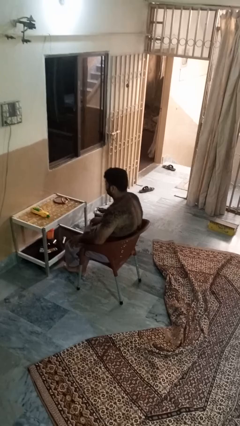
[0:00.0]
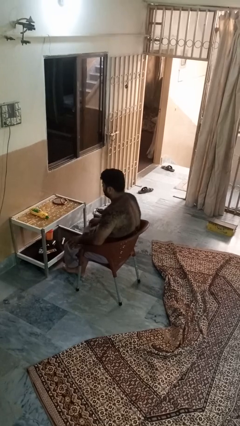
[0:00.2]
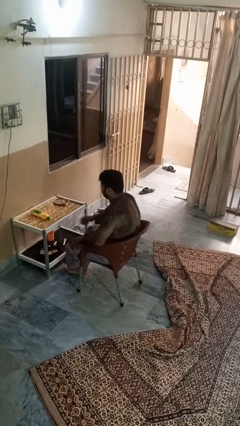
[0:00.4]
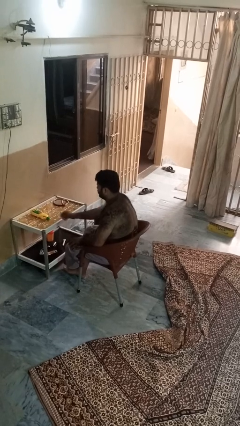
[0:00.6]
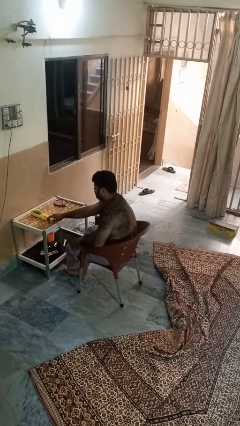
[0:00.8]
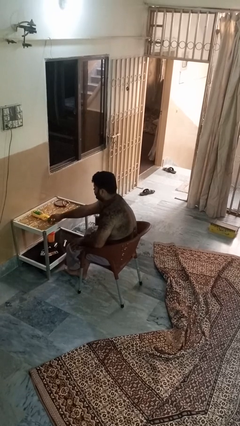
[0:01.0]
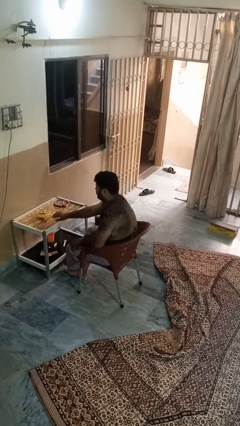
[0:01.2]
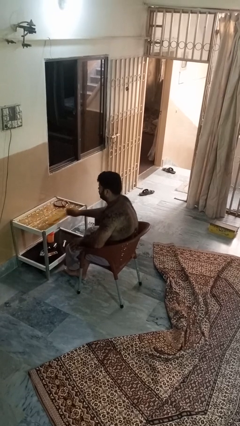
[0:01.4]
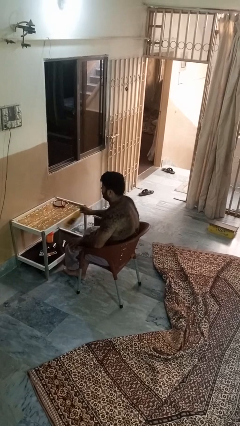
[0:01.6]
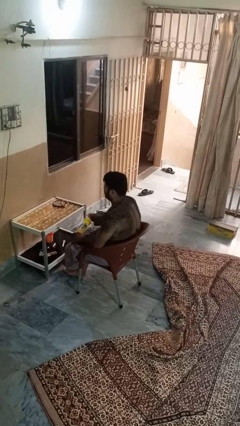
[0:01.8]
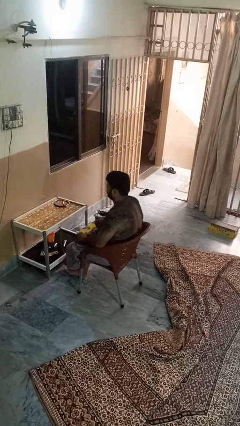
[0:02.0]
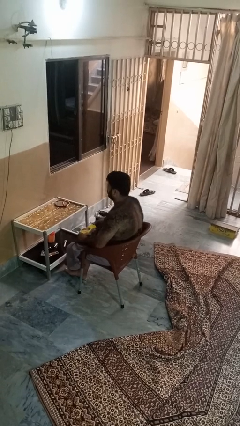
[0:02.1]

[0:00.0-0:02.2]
person picks up object from table

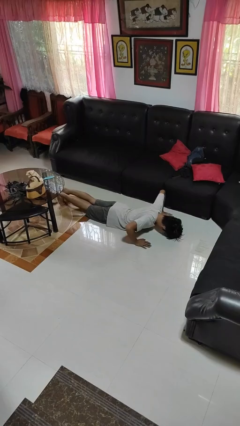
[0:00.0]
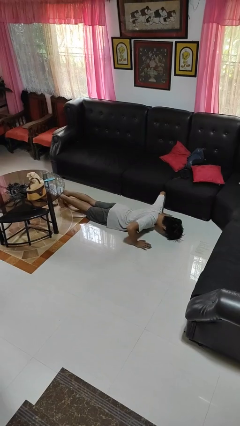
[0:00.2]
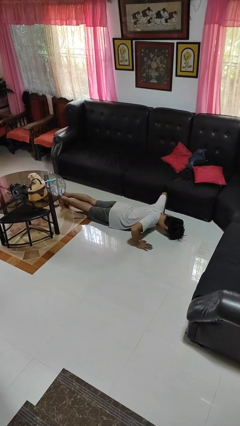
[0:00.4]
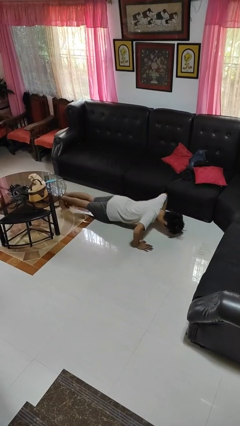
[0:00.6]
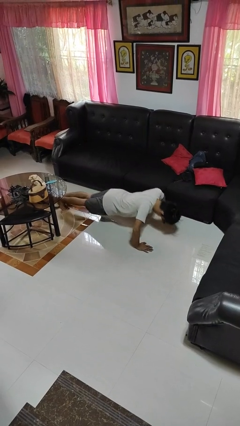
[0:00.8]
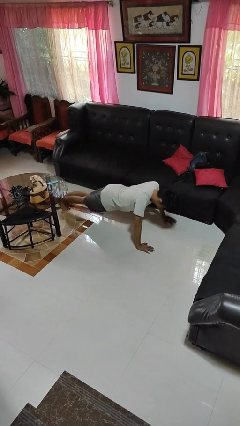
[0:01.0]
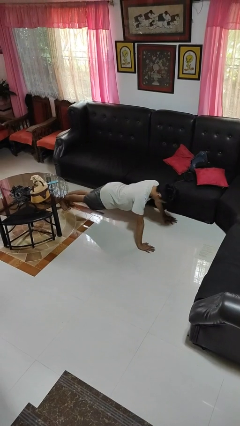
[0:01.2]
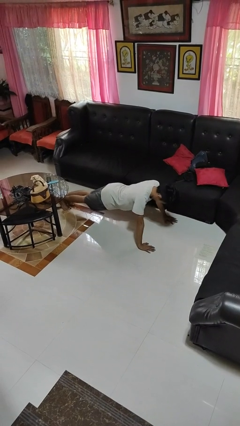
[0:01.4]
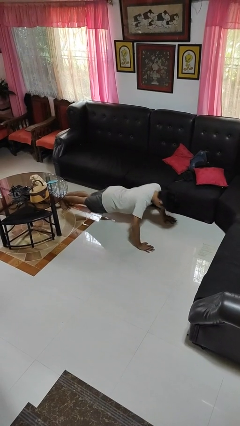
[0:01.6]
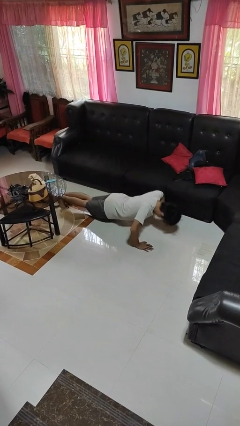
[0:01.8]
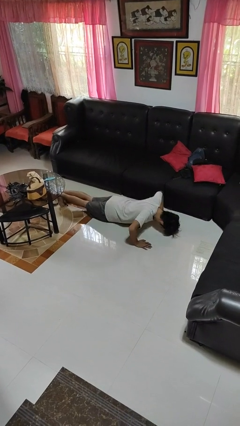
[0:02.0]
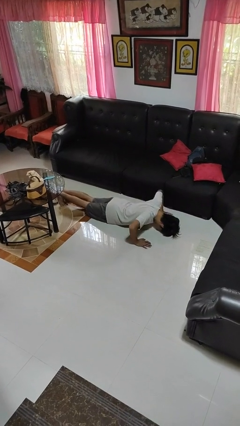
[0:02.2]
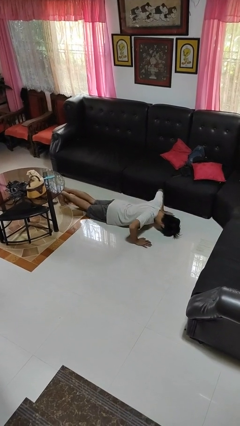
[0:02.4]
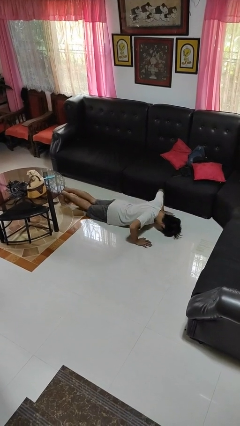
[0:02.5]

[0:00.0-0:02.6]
person exercises with pushup

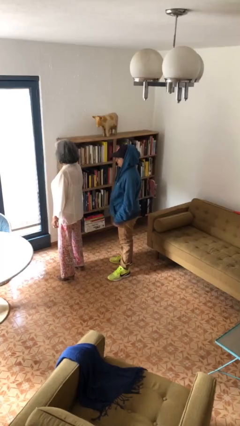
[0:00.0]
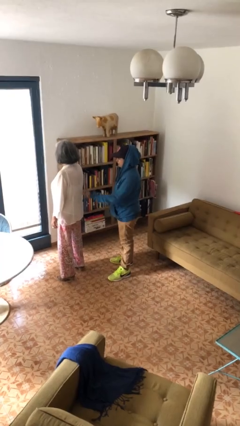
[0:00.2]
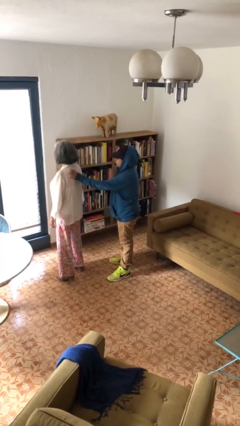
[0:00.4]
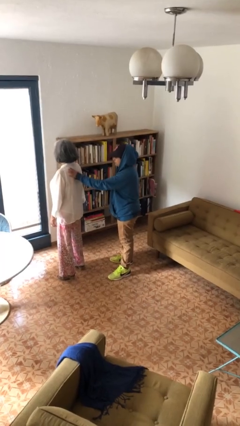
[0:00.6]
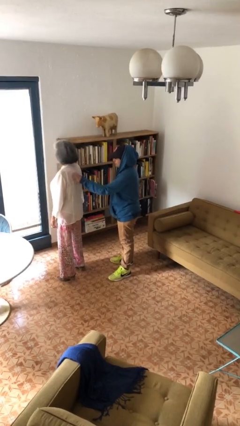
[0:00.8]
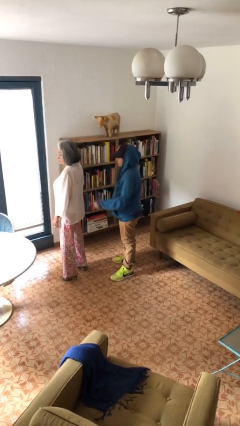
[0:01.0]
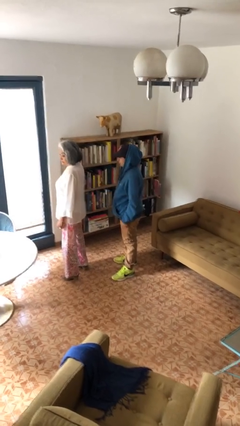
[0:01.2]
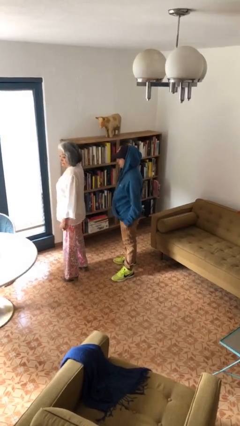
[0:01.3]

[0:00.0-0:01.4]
person touches back of person

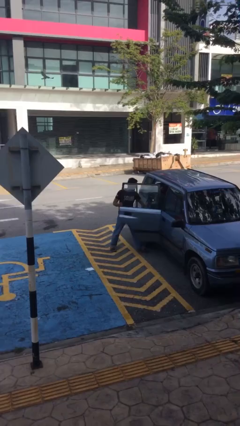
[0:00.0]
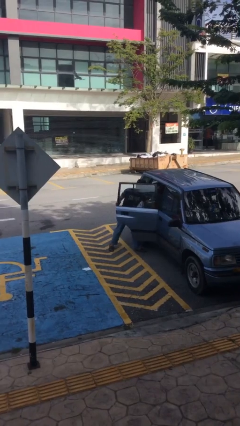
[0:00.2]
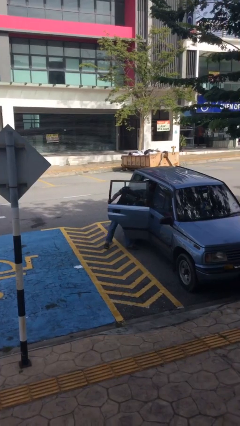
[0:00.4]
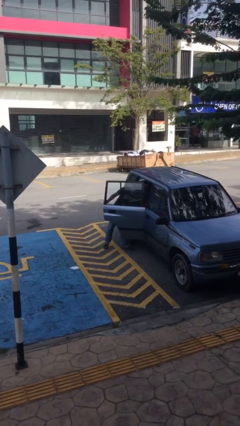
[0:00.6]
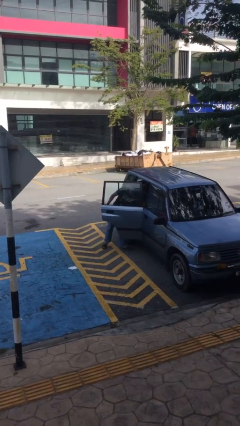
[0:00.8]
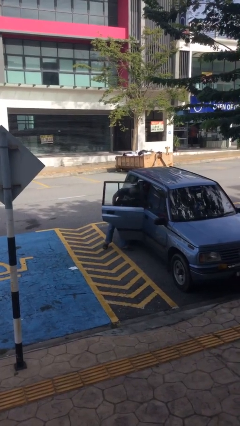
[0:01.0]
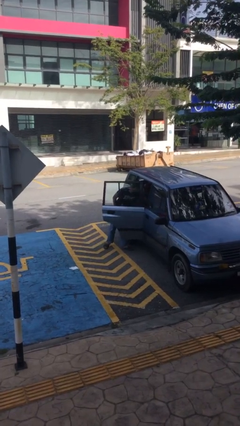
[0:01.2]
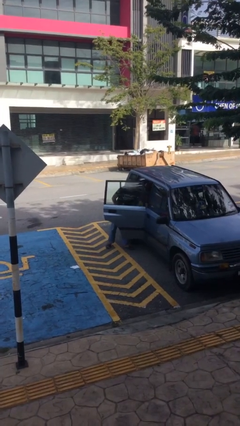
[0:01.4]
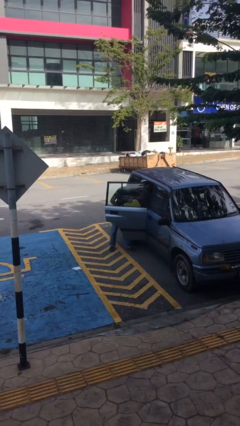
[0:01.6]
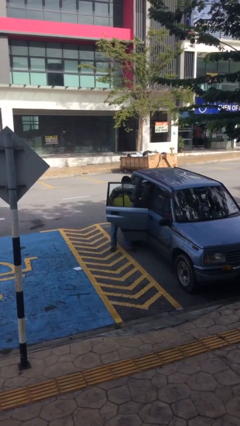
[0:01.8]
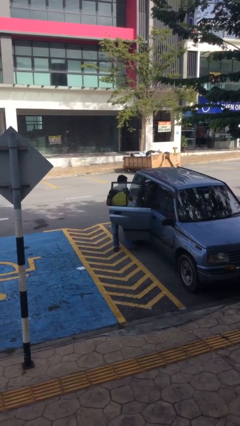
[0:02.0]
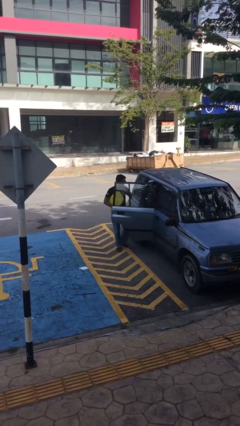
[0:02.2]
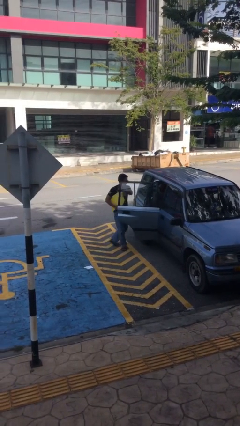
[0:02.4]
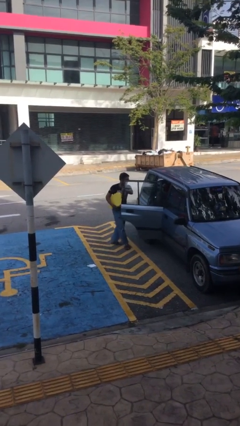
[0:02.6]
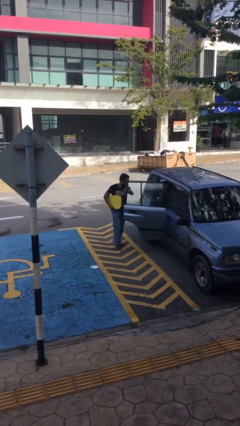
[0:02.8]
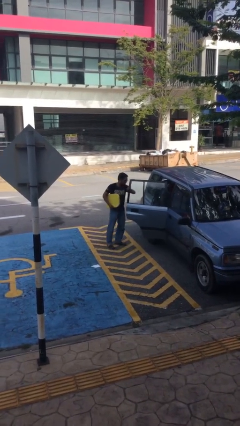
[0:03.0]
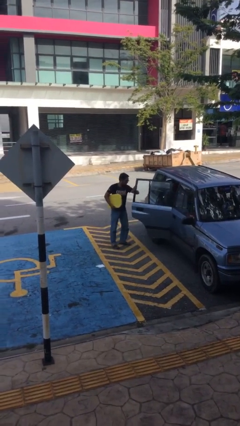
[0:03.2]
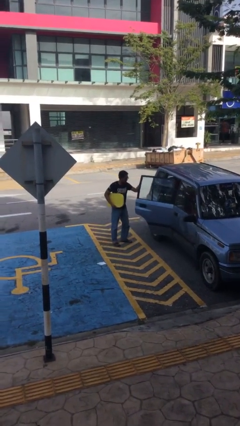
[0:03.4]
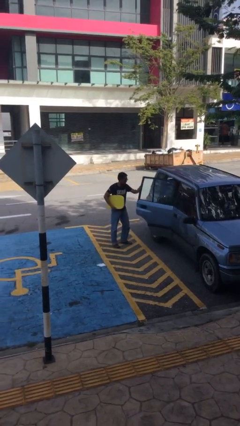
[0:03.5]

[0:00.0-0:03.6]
person unloads car

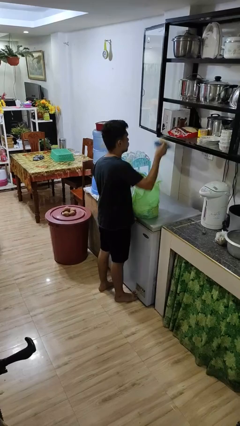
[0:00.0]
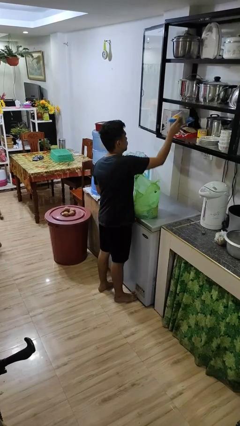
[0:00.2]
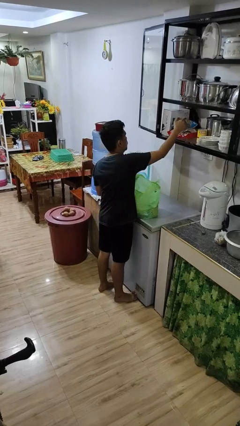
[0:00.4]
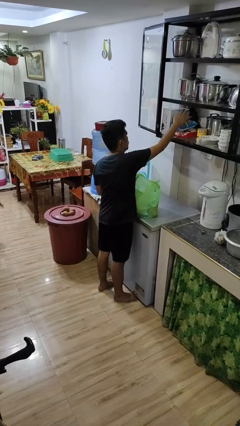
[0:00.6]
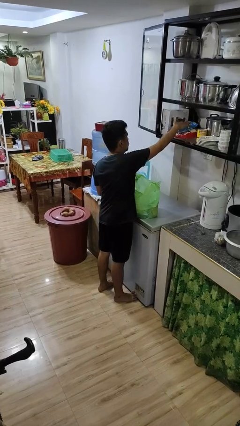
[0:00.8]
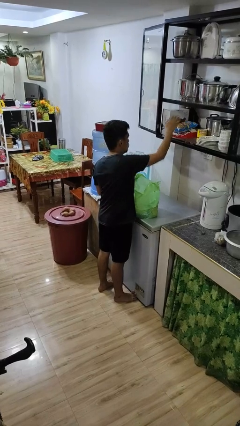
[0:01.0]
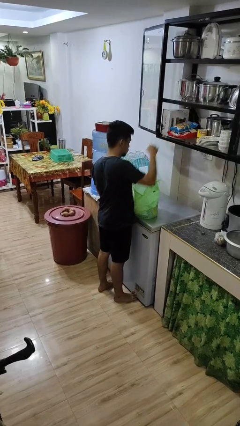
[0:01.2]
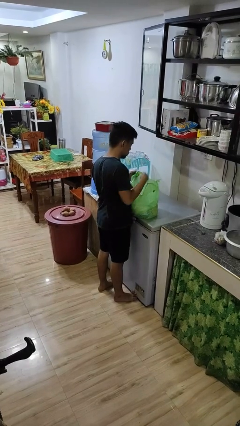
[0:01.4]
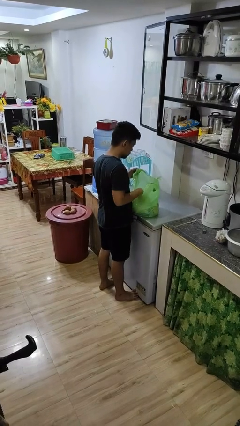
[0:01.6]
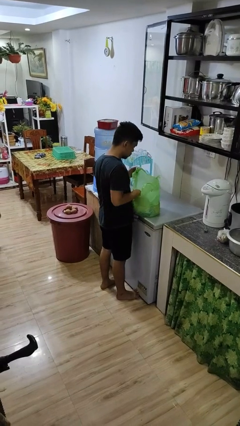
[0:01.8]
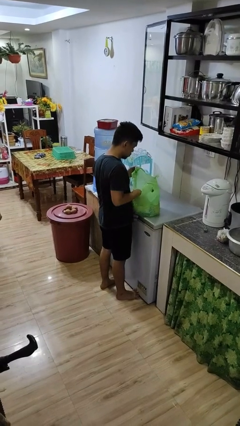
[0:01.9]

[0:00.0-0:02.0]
person loads groceries into cabinet

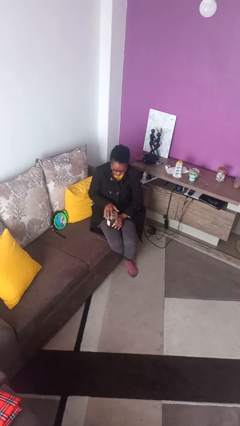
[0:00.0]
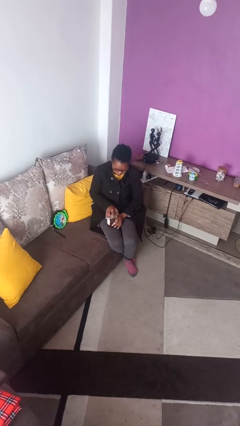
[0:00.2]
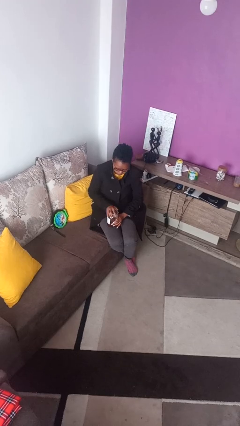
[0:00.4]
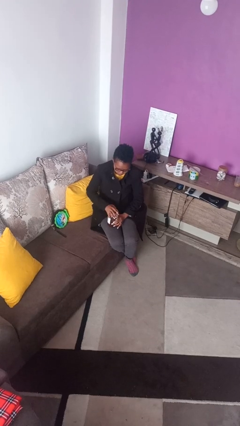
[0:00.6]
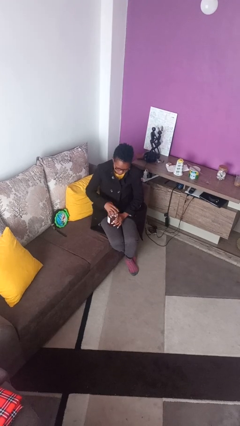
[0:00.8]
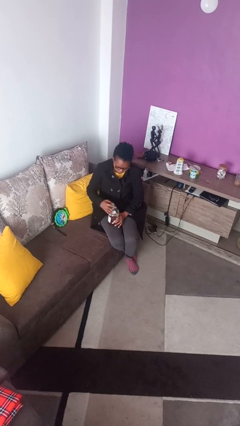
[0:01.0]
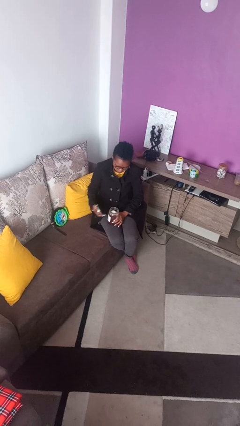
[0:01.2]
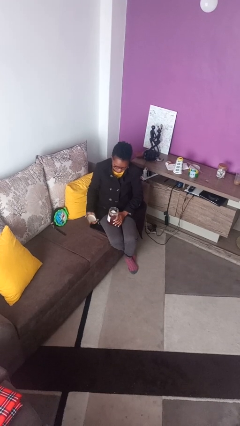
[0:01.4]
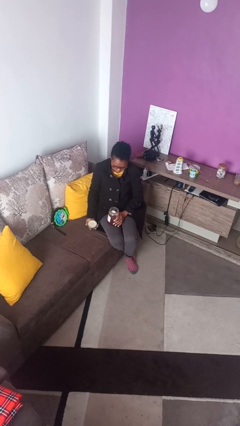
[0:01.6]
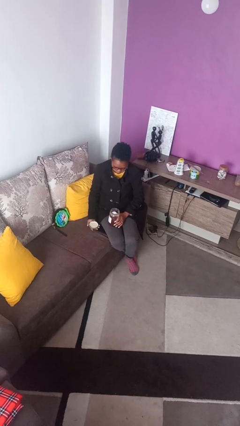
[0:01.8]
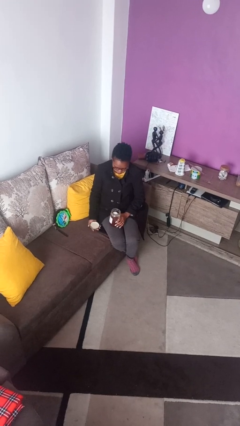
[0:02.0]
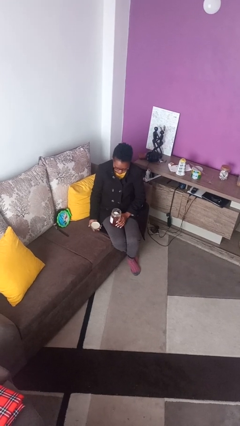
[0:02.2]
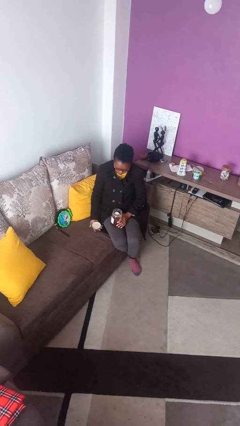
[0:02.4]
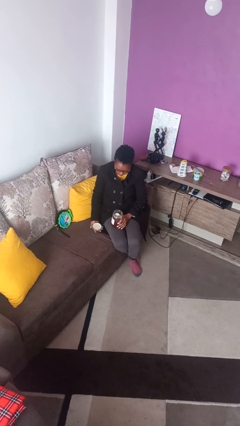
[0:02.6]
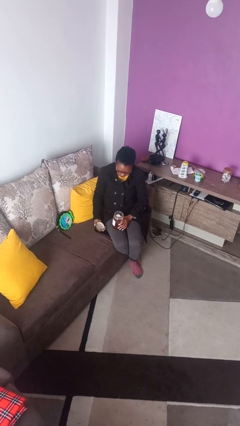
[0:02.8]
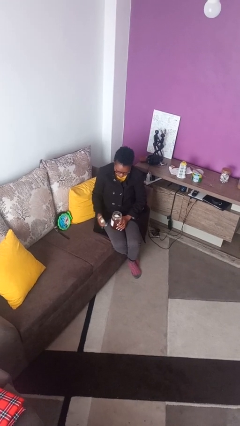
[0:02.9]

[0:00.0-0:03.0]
person opens jar

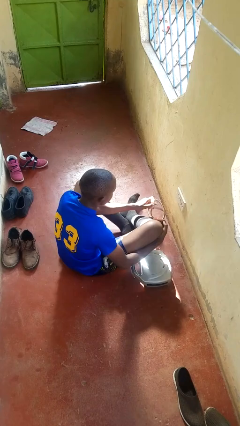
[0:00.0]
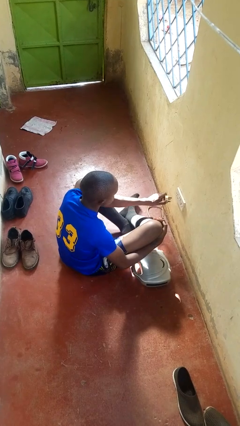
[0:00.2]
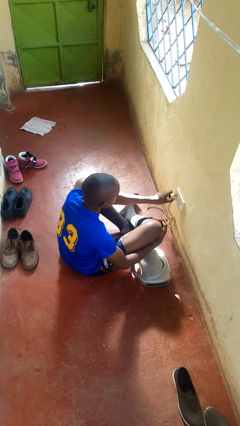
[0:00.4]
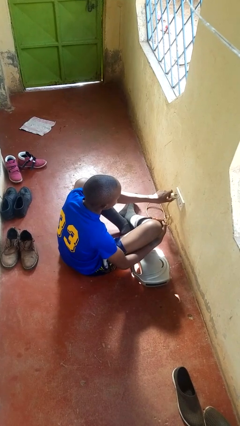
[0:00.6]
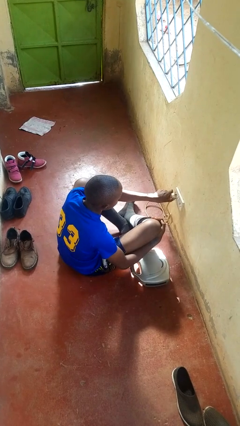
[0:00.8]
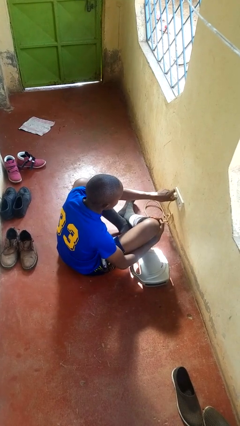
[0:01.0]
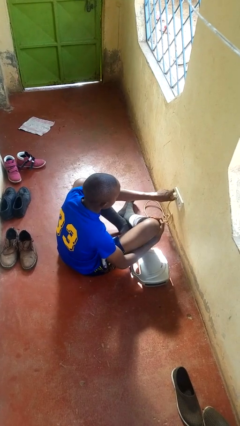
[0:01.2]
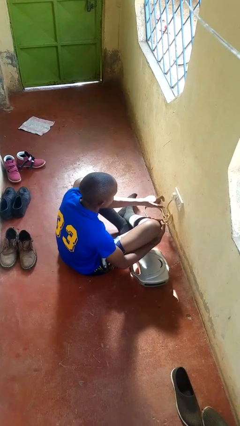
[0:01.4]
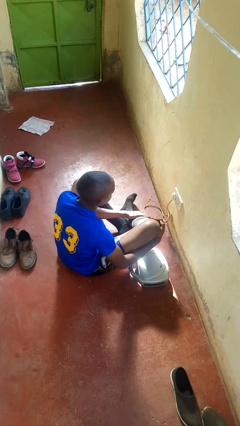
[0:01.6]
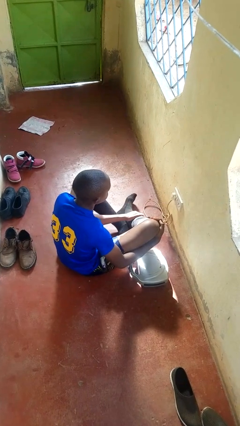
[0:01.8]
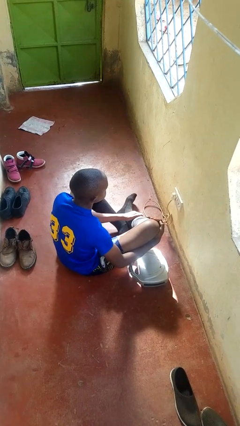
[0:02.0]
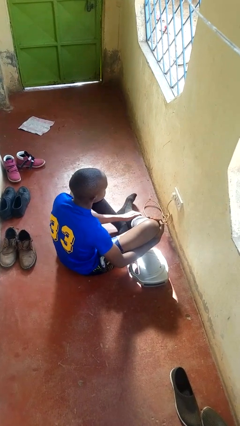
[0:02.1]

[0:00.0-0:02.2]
person plugs into electrical socket
